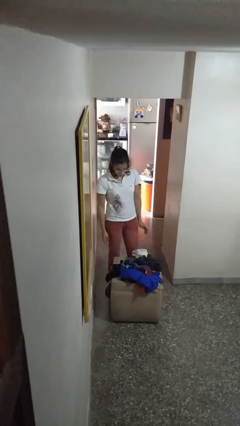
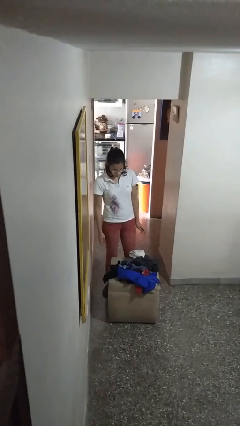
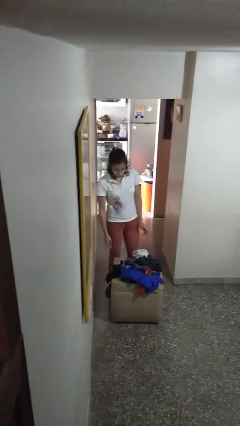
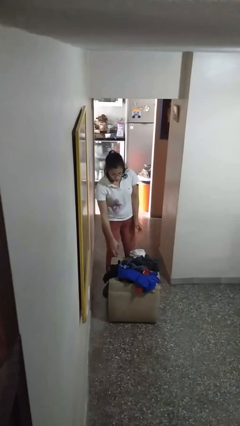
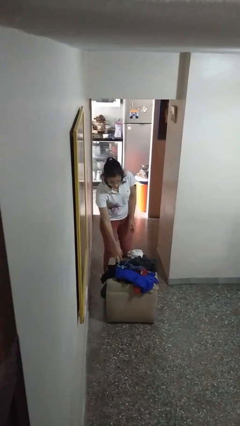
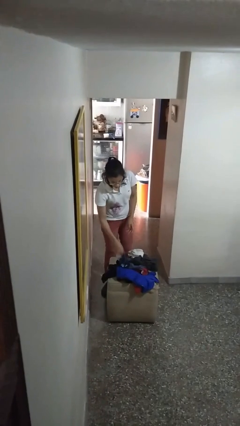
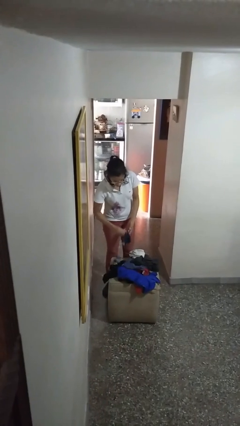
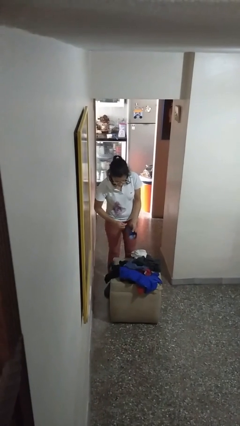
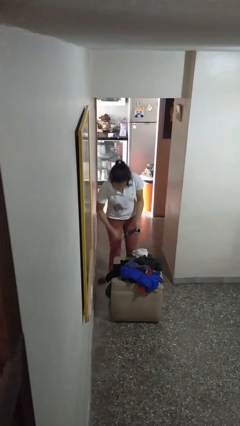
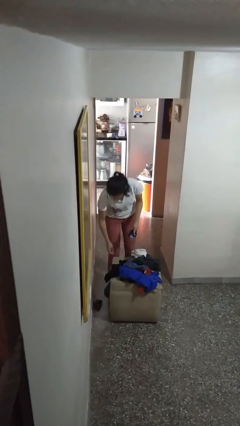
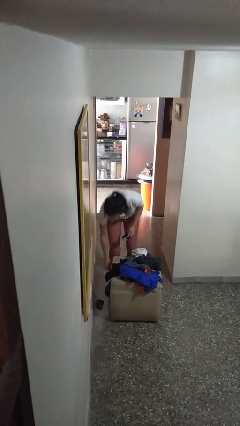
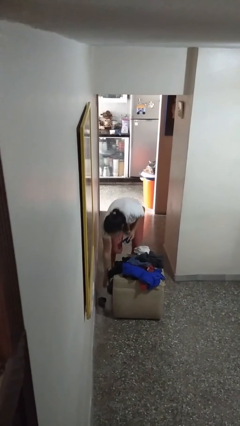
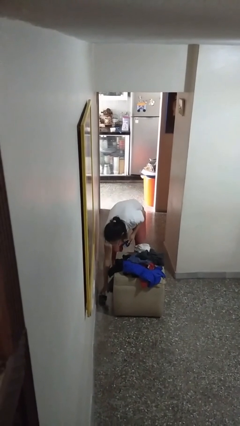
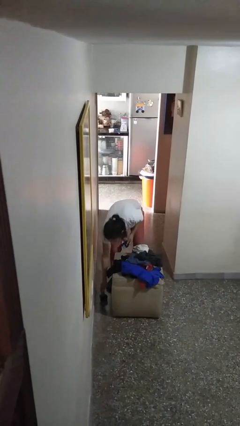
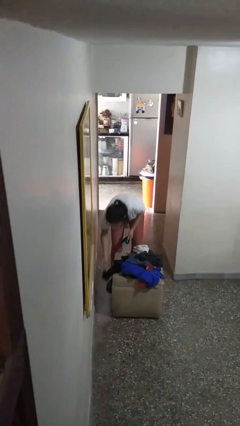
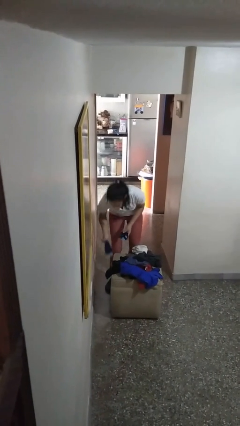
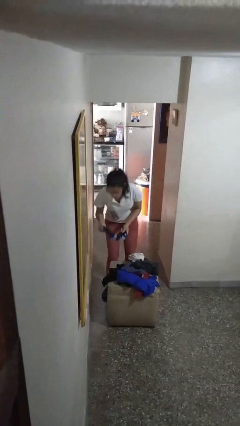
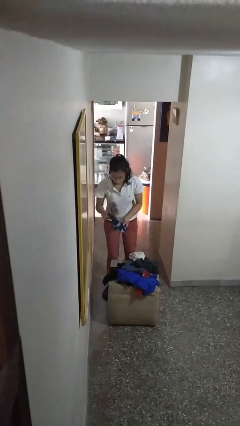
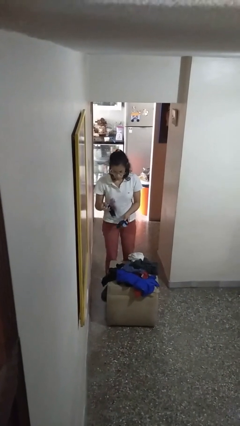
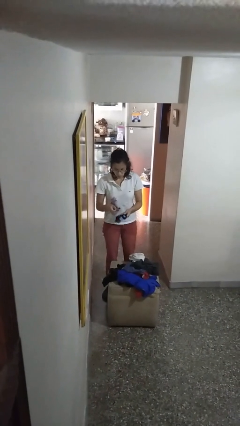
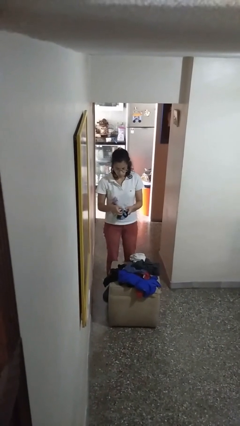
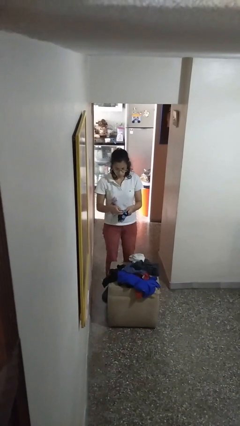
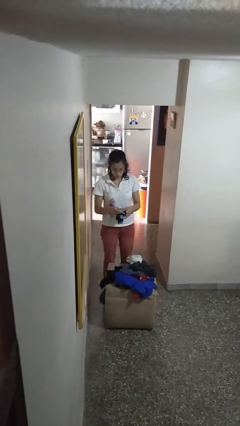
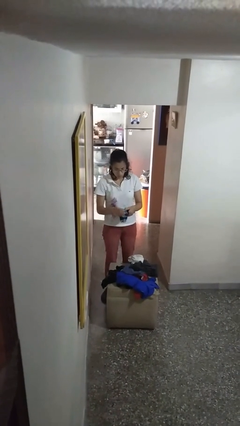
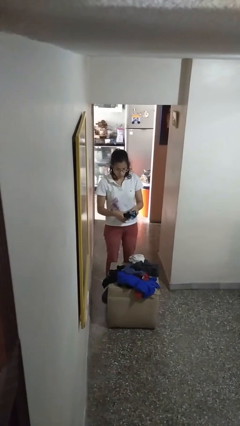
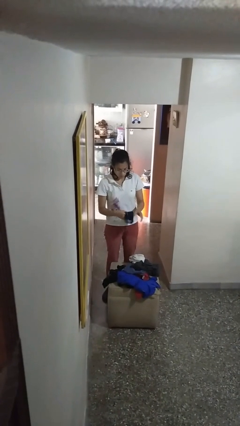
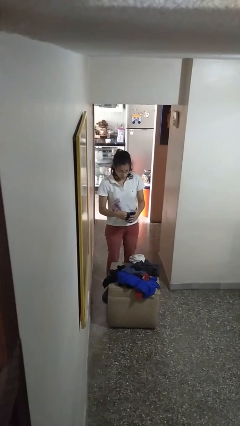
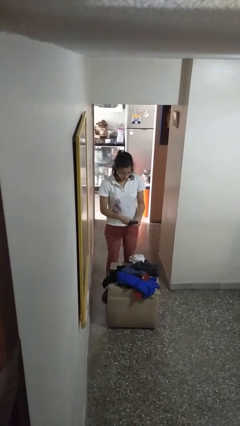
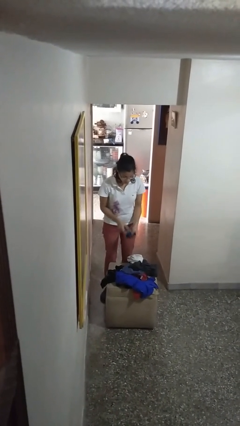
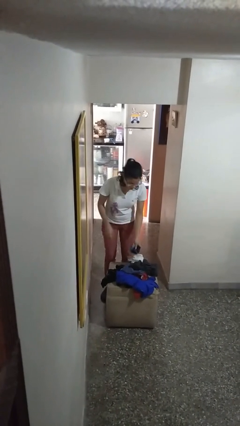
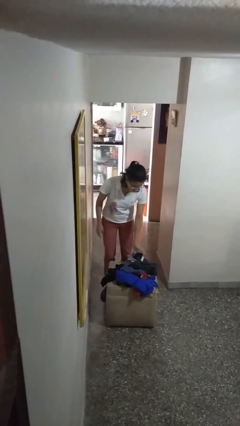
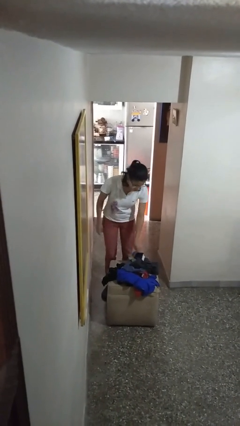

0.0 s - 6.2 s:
person folds socks

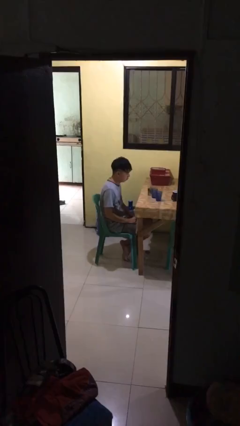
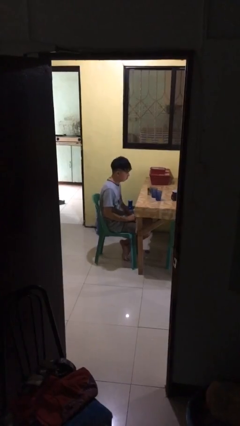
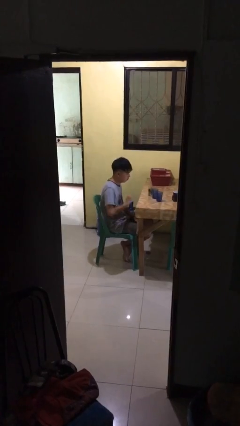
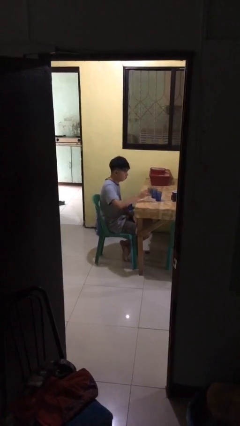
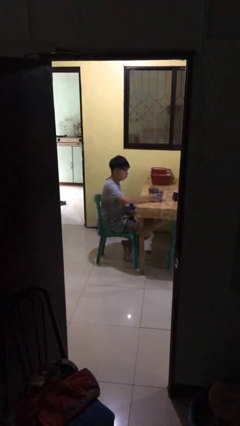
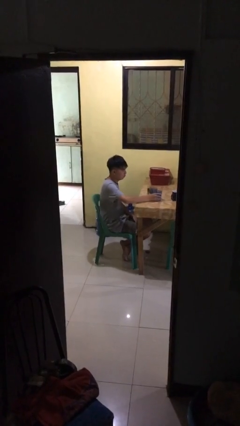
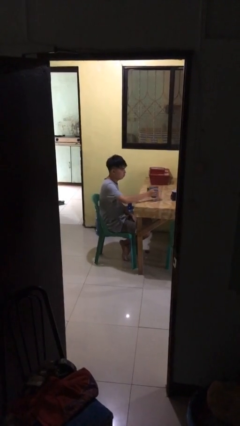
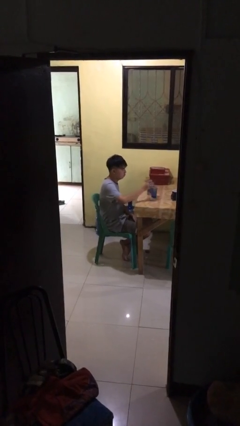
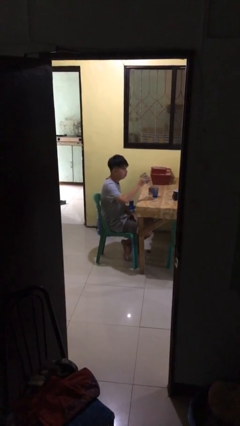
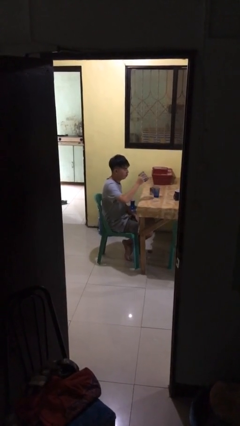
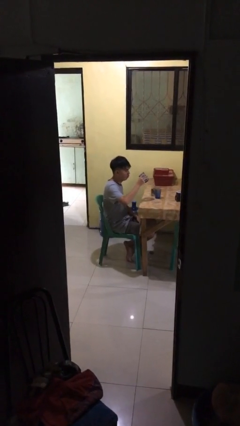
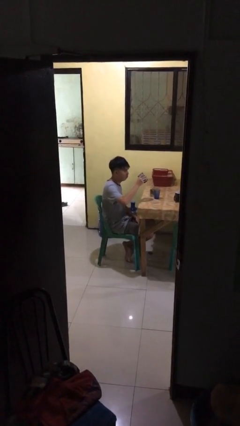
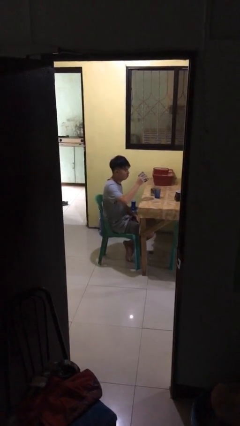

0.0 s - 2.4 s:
person picks up object from table

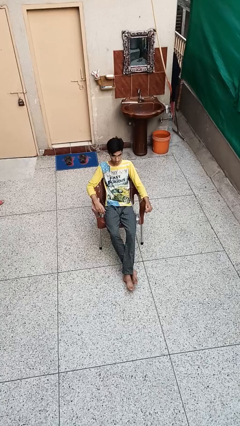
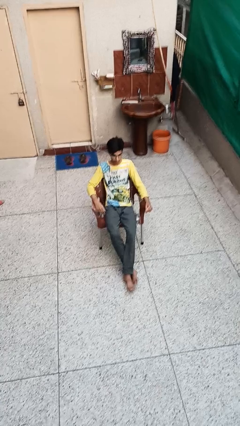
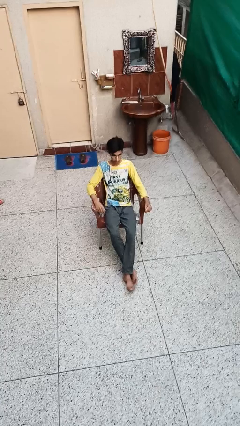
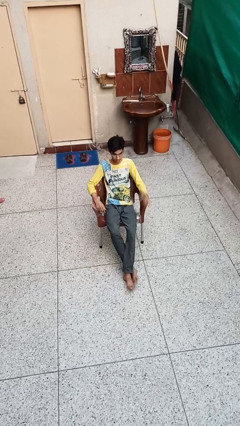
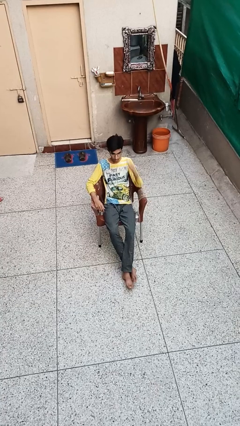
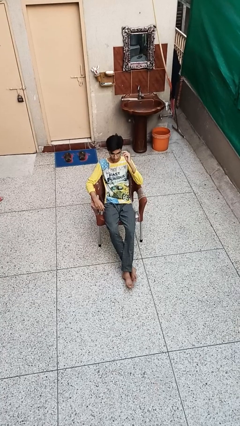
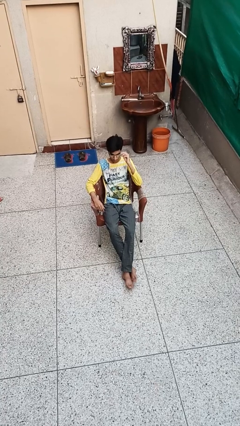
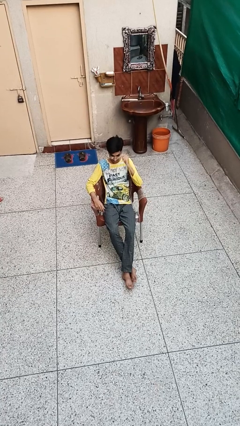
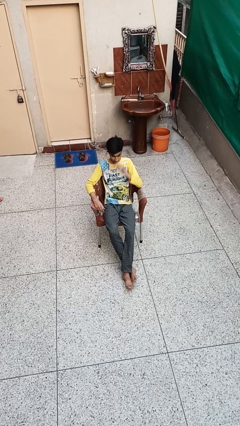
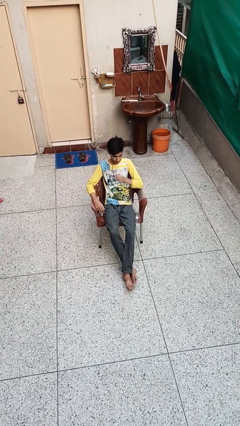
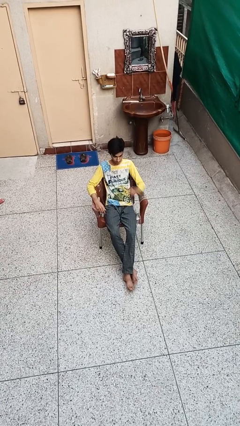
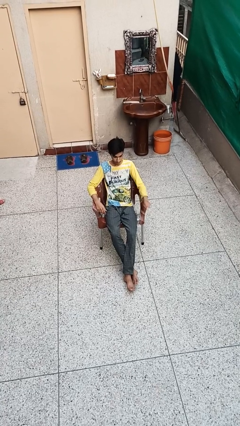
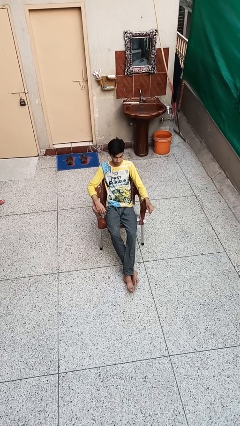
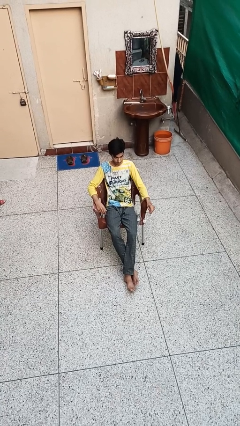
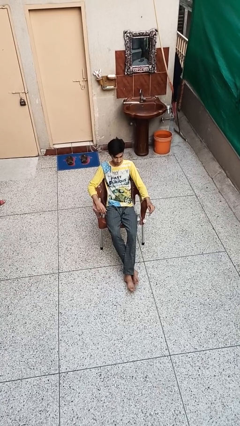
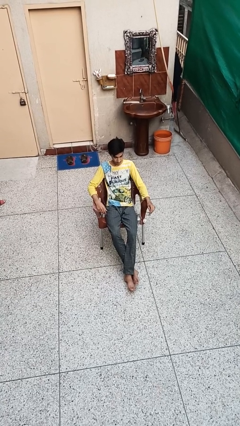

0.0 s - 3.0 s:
person takes off glasses

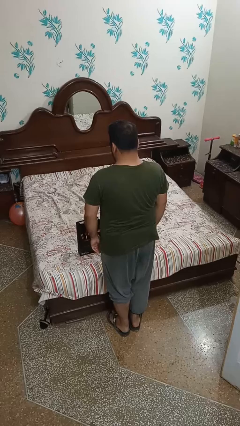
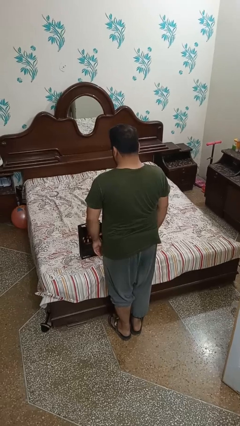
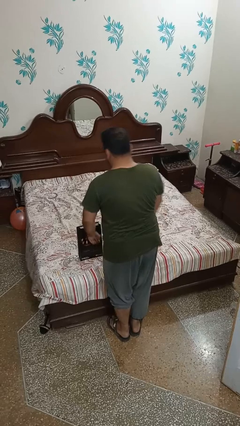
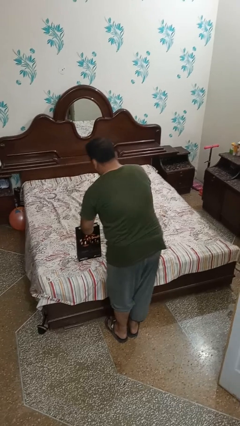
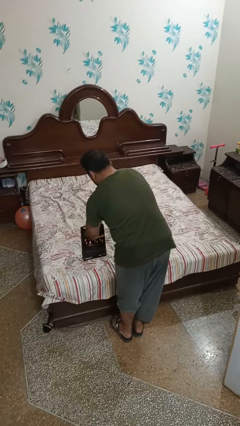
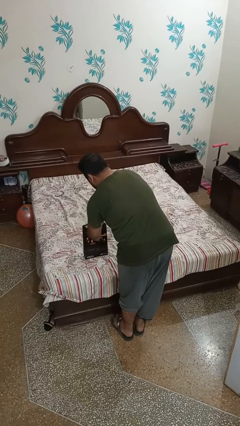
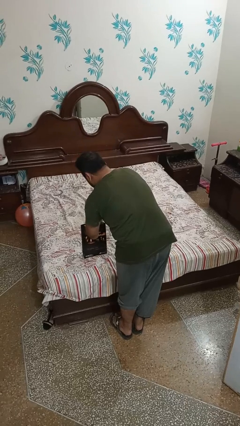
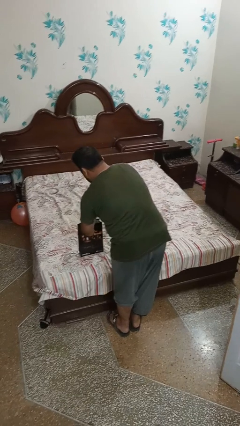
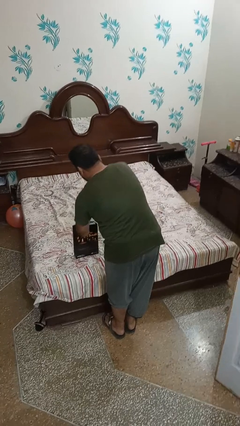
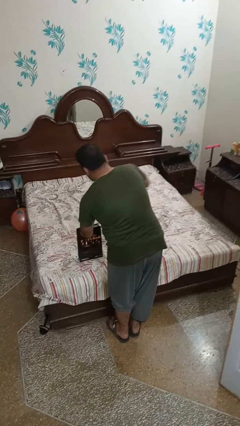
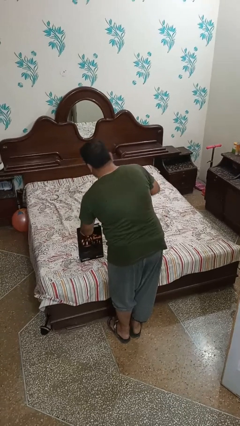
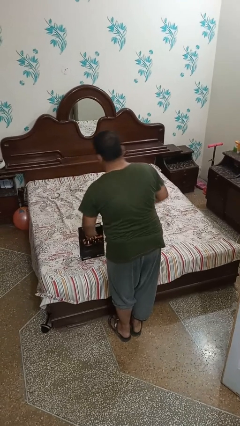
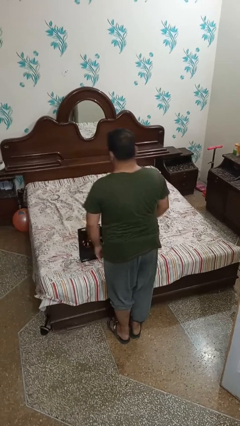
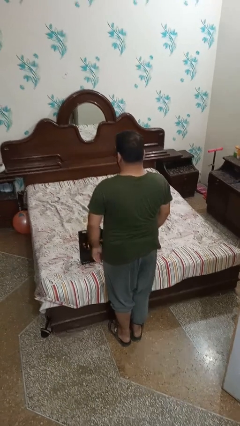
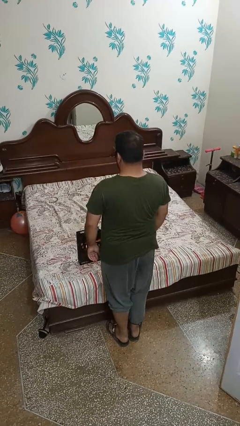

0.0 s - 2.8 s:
person takes object from bag

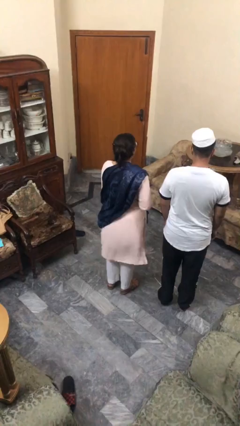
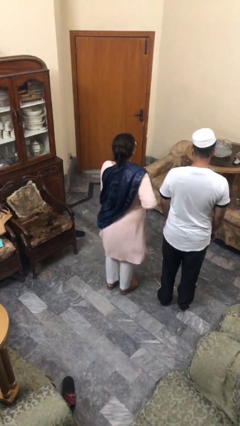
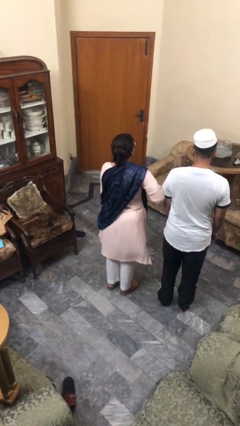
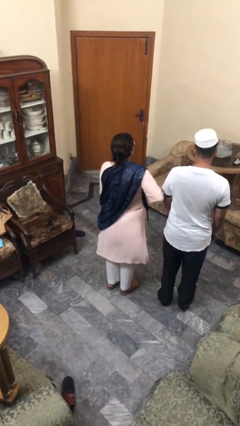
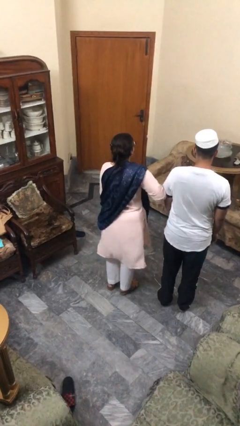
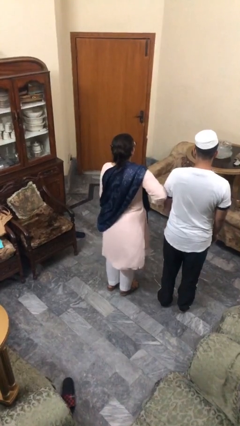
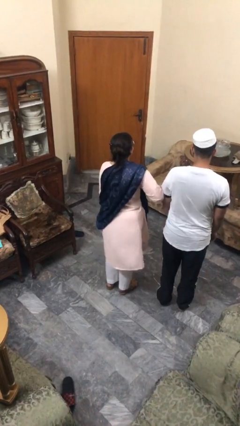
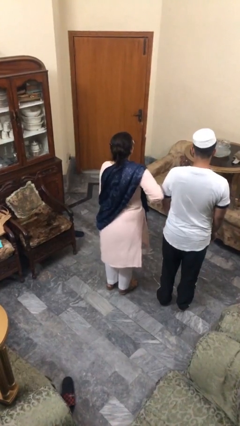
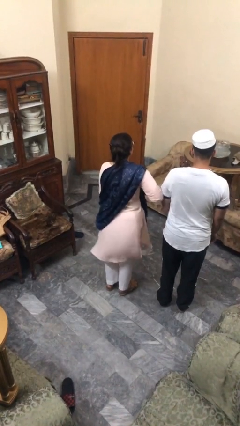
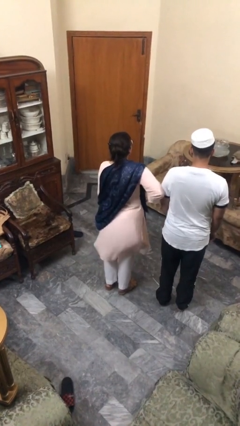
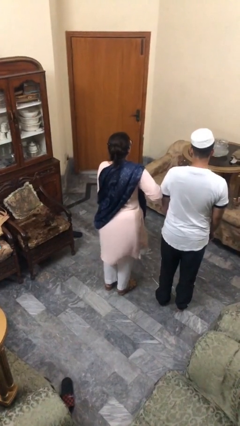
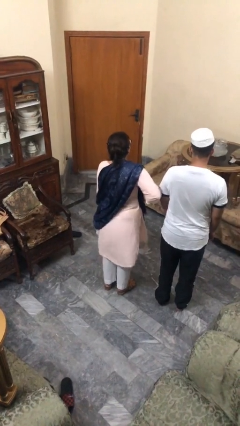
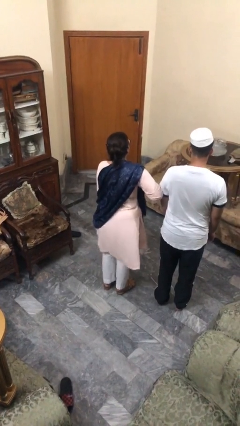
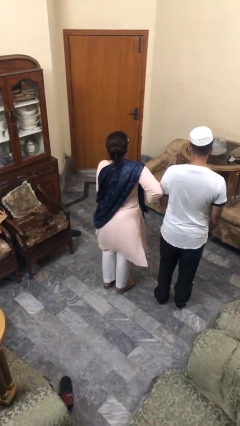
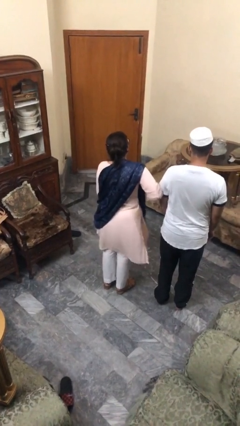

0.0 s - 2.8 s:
person nudges person with elbow

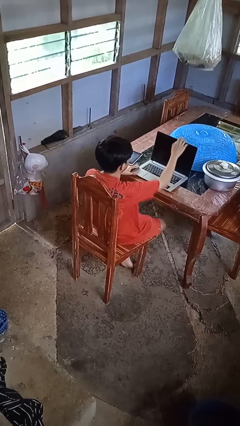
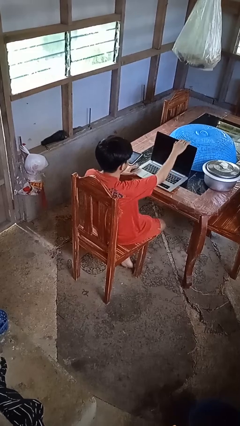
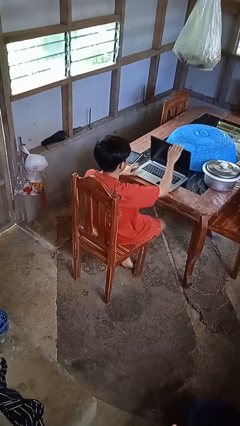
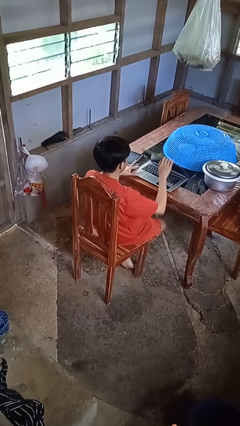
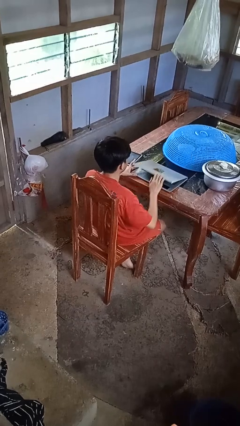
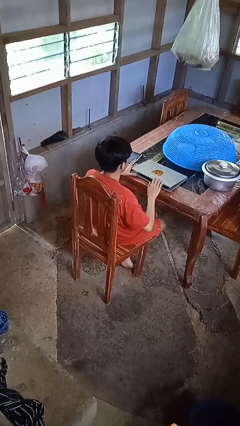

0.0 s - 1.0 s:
person closes laptop
